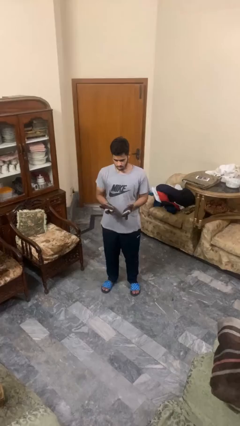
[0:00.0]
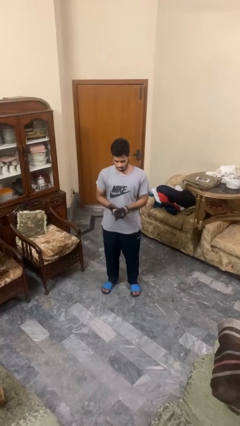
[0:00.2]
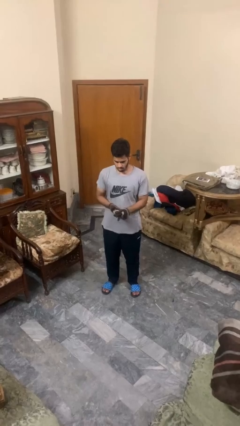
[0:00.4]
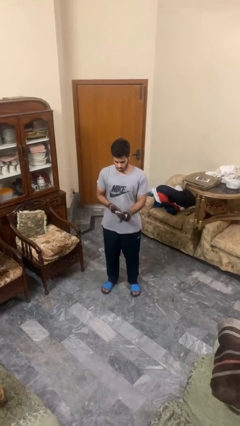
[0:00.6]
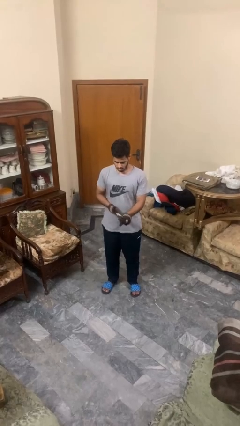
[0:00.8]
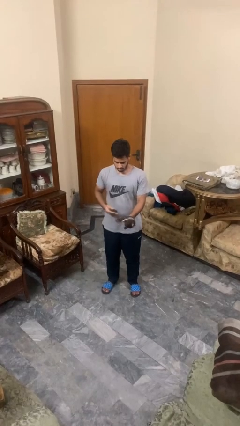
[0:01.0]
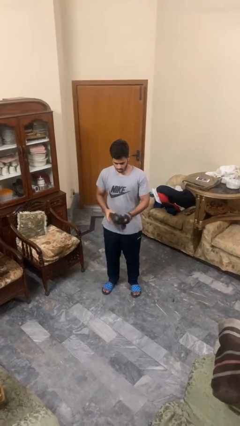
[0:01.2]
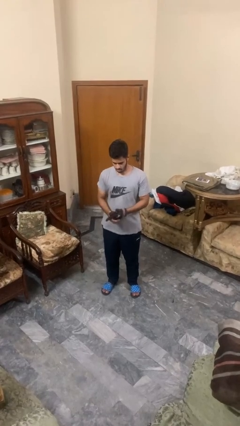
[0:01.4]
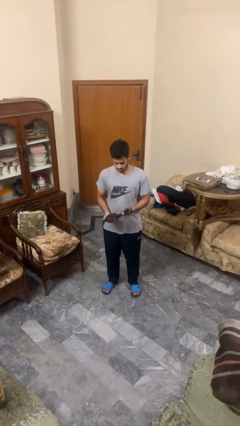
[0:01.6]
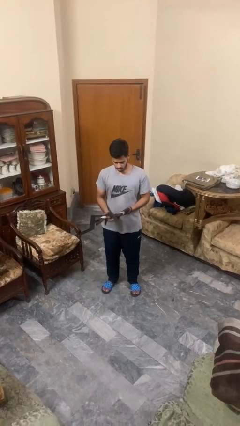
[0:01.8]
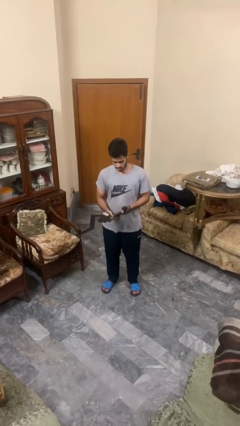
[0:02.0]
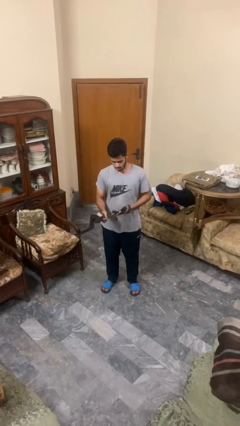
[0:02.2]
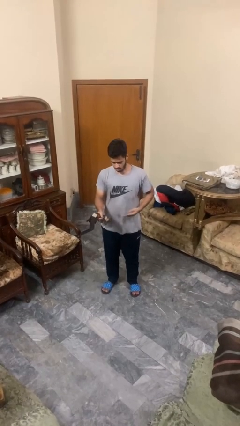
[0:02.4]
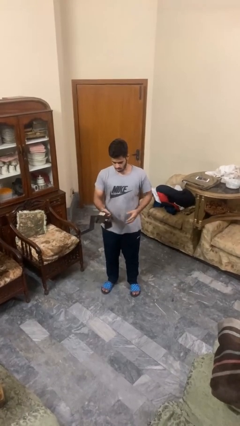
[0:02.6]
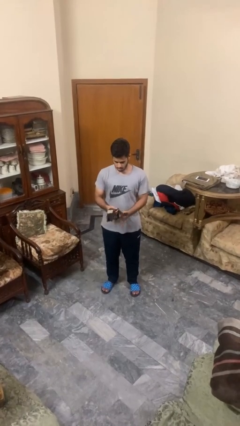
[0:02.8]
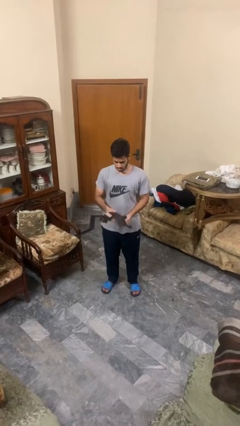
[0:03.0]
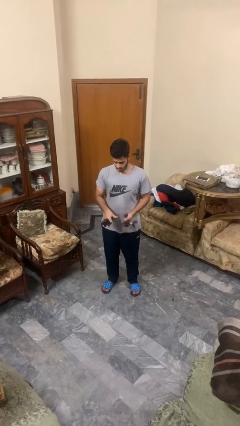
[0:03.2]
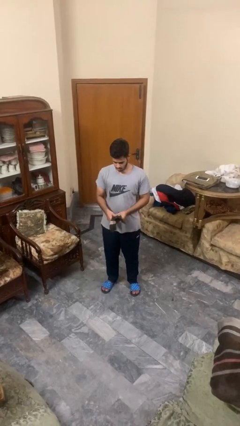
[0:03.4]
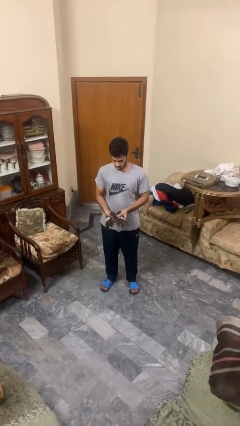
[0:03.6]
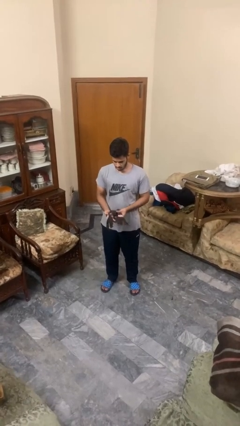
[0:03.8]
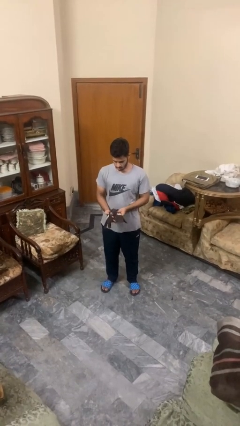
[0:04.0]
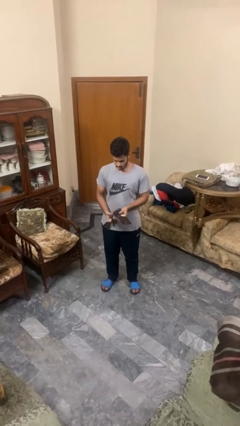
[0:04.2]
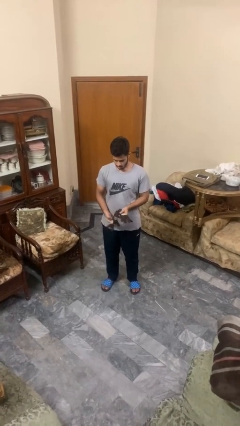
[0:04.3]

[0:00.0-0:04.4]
person takes off gloves

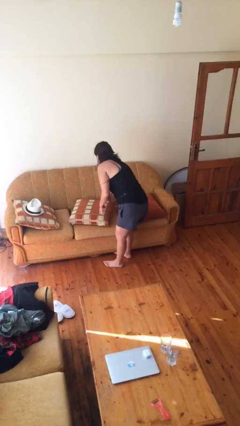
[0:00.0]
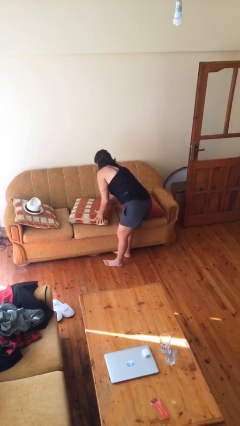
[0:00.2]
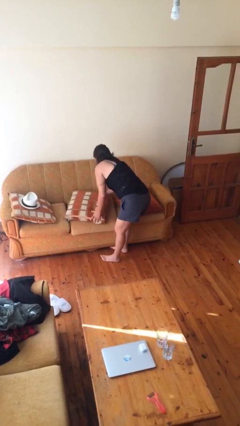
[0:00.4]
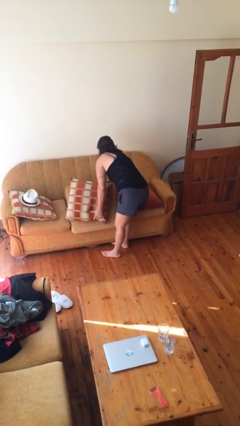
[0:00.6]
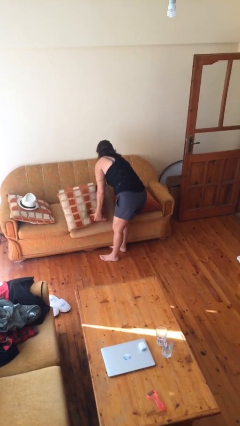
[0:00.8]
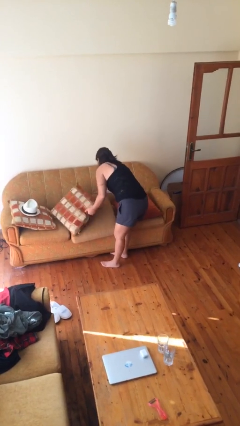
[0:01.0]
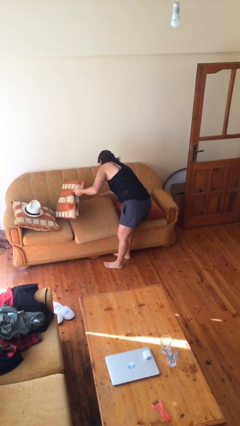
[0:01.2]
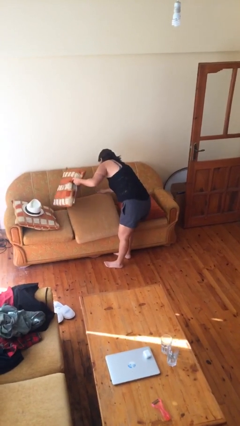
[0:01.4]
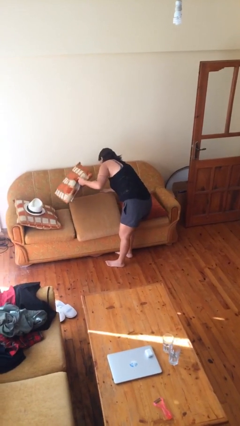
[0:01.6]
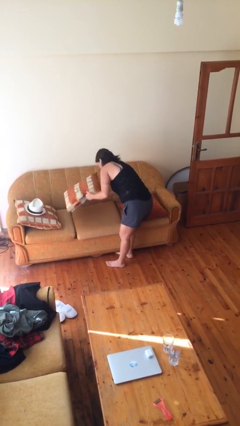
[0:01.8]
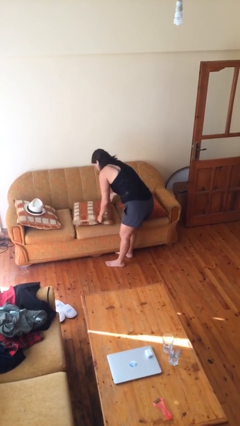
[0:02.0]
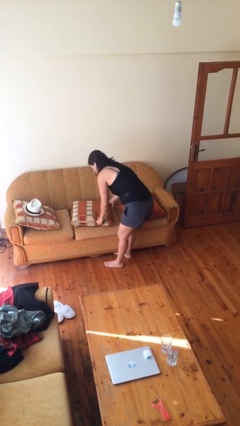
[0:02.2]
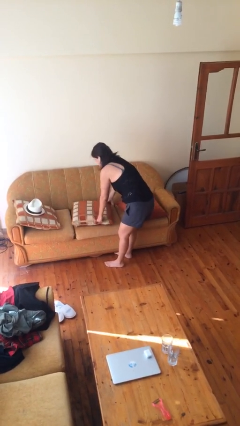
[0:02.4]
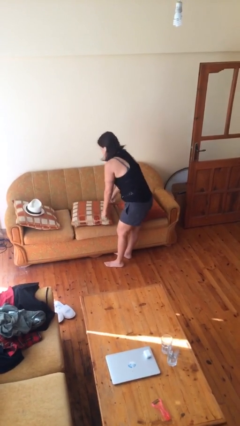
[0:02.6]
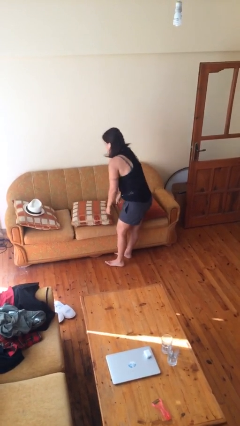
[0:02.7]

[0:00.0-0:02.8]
person searches in couch

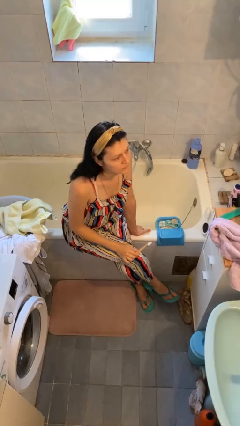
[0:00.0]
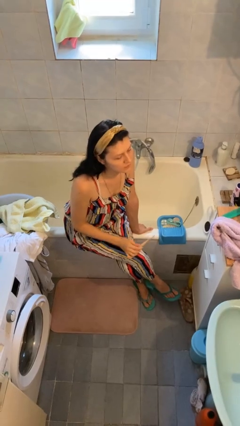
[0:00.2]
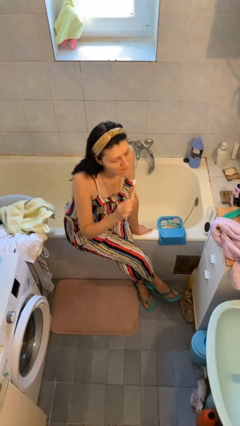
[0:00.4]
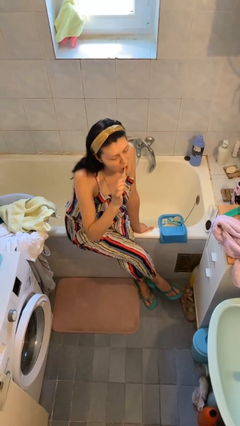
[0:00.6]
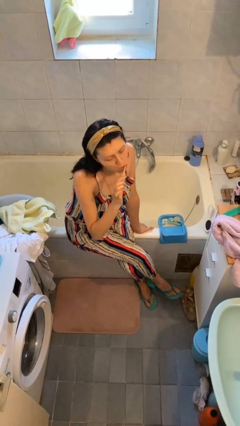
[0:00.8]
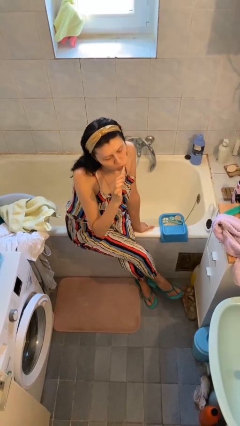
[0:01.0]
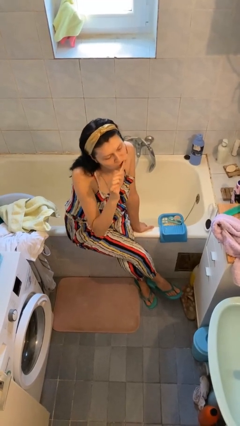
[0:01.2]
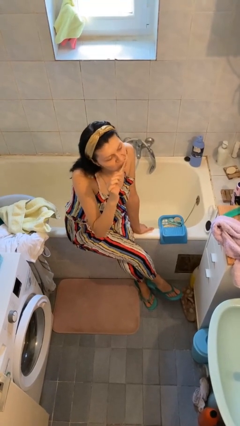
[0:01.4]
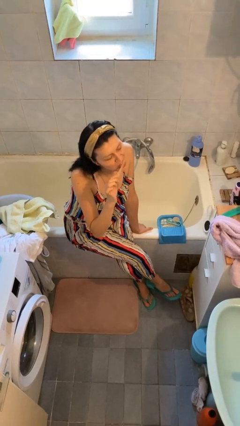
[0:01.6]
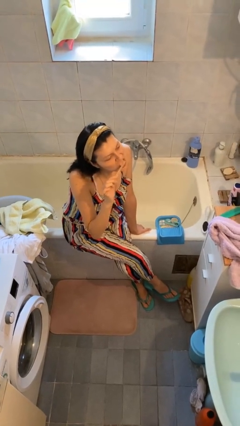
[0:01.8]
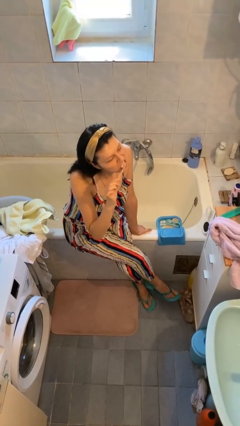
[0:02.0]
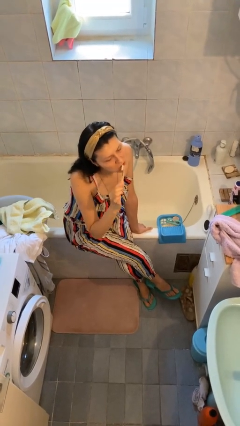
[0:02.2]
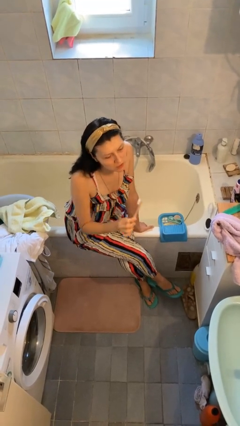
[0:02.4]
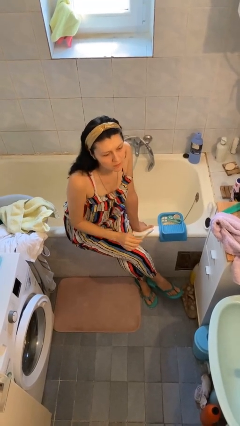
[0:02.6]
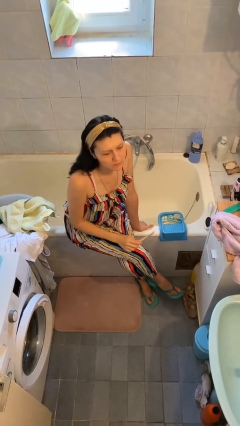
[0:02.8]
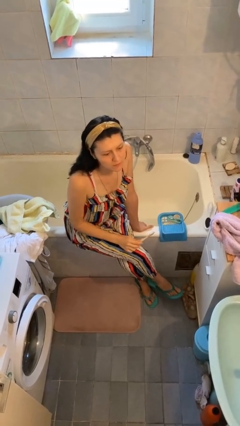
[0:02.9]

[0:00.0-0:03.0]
person brushes teeth

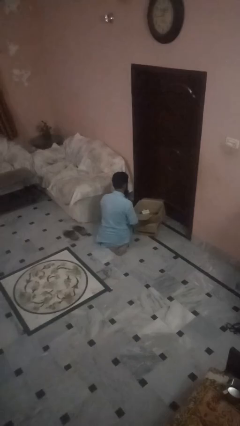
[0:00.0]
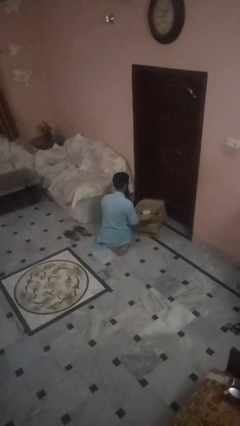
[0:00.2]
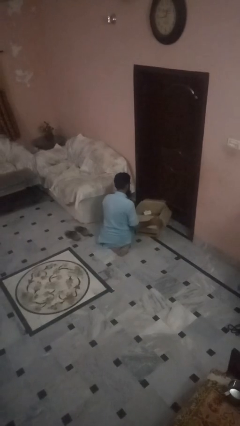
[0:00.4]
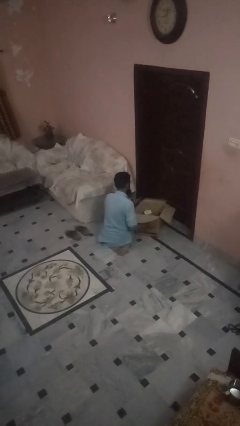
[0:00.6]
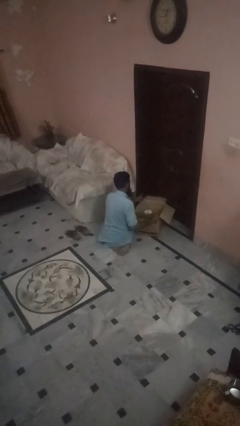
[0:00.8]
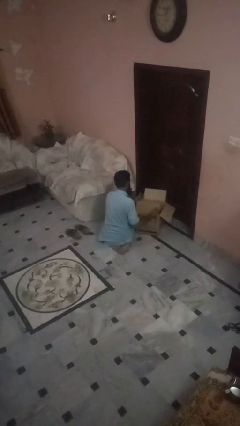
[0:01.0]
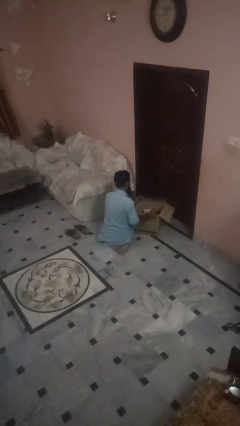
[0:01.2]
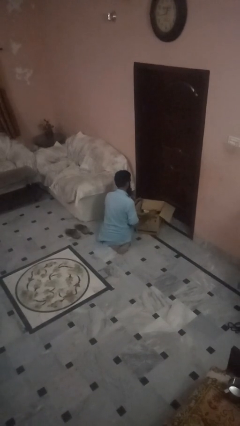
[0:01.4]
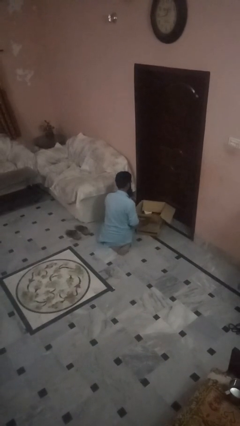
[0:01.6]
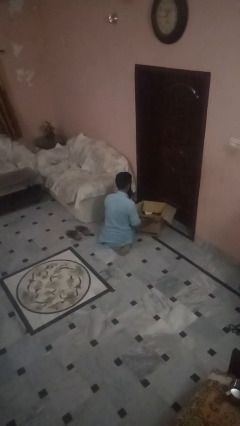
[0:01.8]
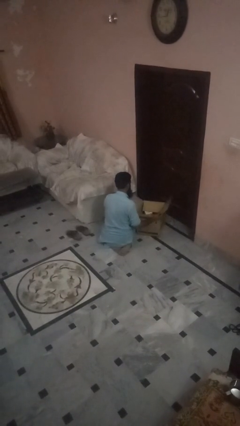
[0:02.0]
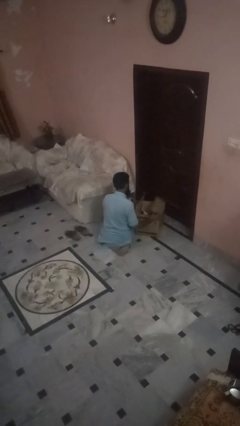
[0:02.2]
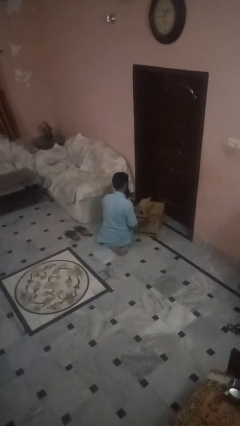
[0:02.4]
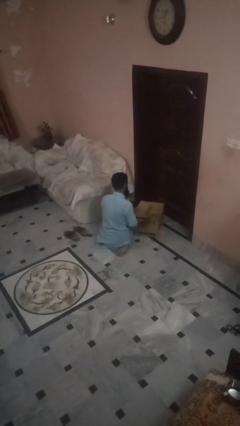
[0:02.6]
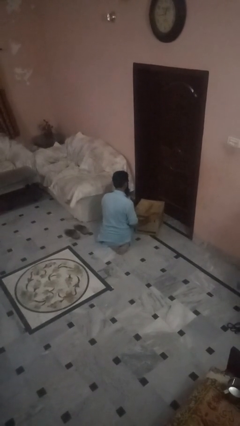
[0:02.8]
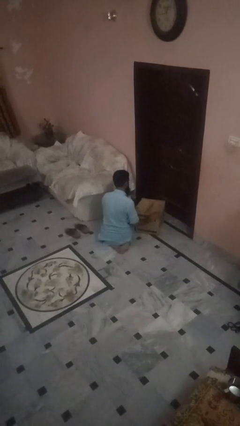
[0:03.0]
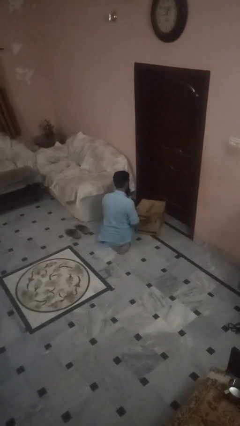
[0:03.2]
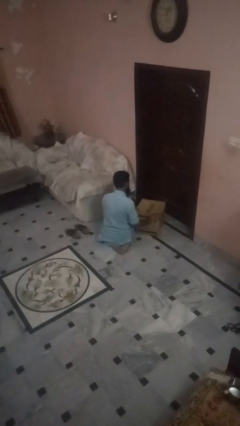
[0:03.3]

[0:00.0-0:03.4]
person closes box

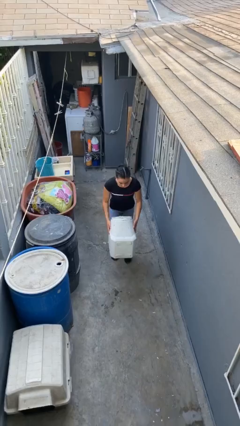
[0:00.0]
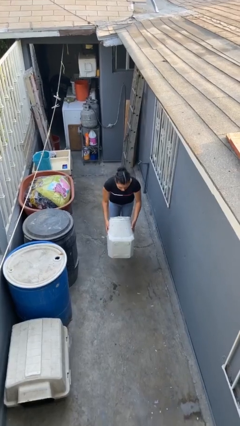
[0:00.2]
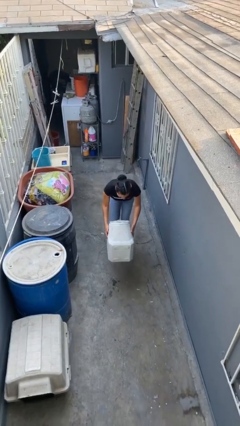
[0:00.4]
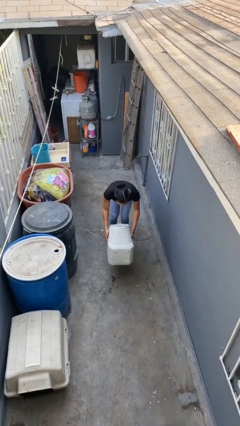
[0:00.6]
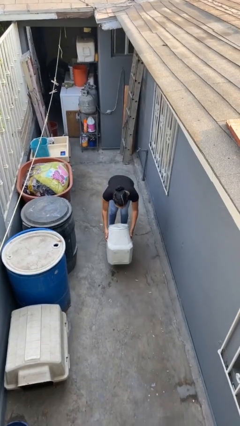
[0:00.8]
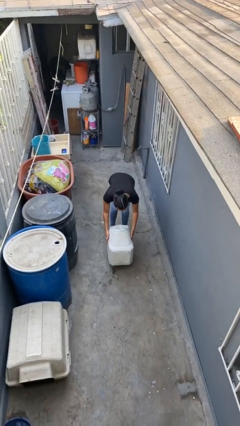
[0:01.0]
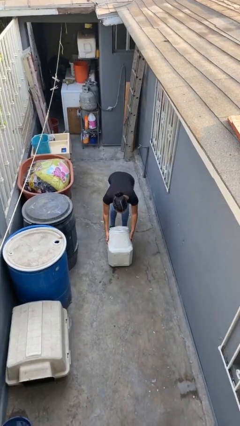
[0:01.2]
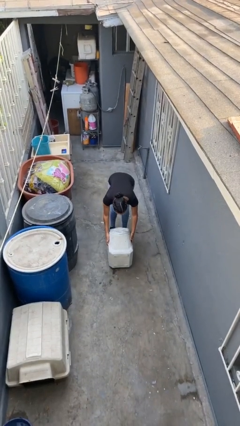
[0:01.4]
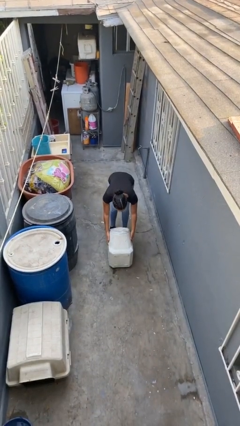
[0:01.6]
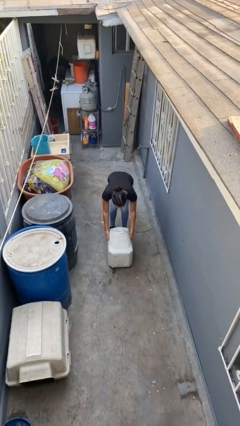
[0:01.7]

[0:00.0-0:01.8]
person puts down object on floor

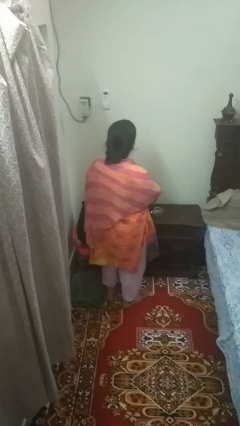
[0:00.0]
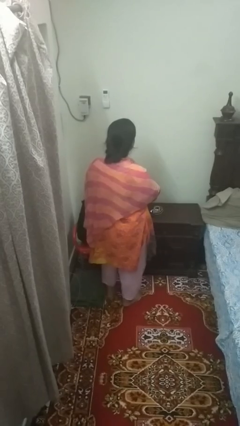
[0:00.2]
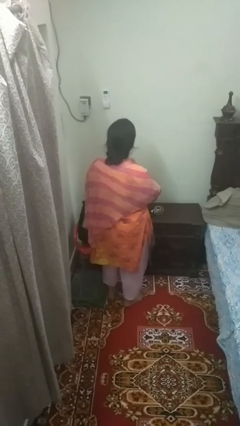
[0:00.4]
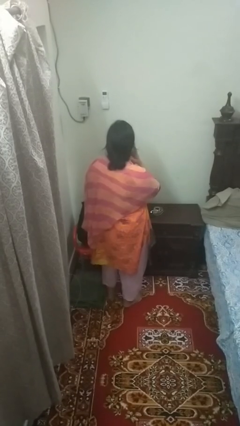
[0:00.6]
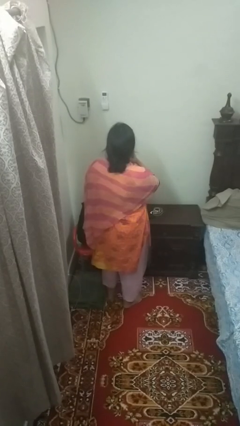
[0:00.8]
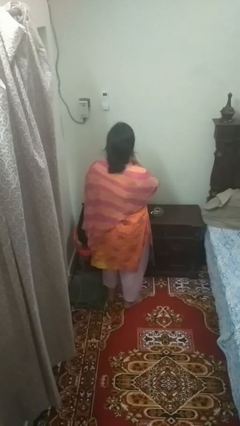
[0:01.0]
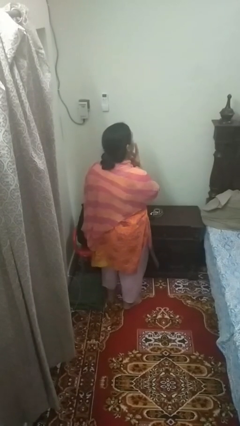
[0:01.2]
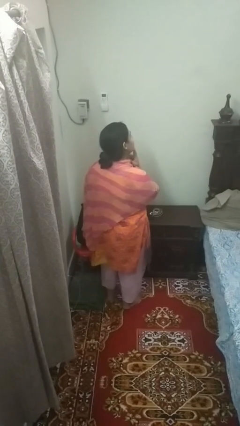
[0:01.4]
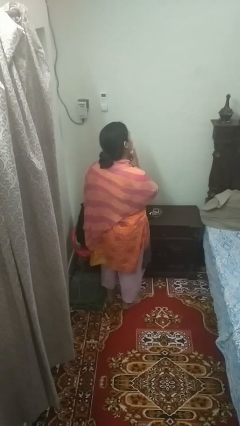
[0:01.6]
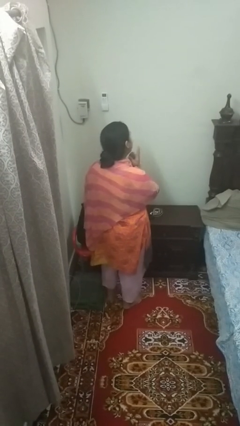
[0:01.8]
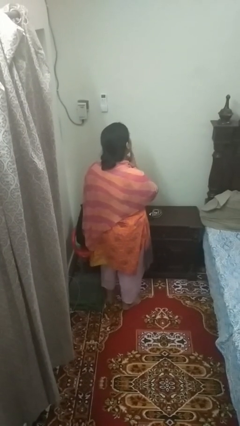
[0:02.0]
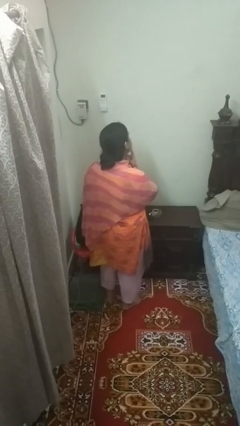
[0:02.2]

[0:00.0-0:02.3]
person strokes chin

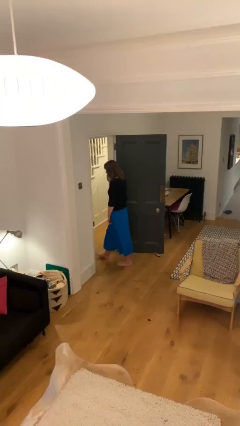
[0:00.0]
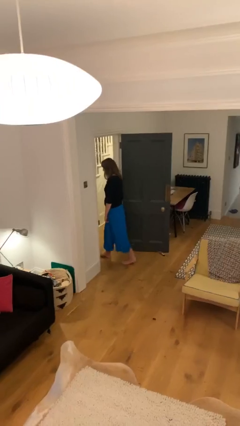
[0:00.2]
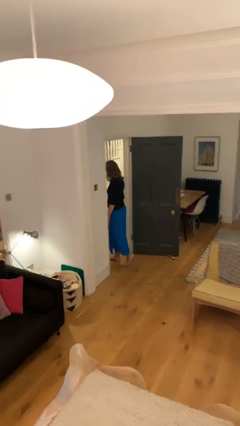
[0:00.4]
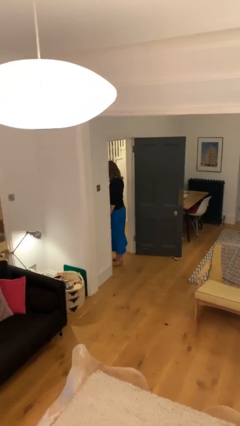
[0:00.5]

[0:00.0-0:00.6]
person exits scene through structure
